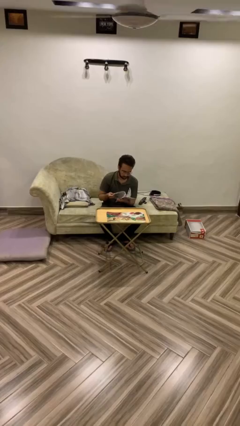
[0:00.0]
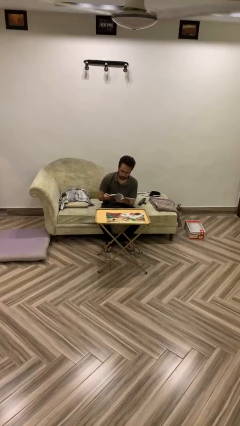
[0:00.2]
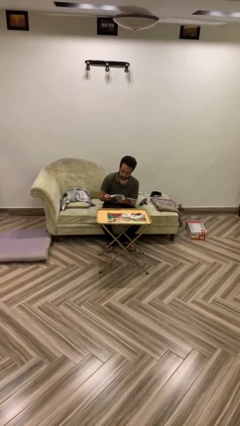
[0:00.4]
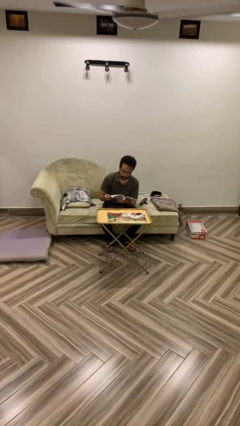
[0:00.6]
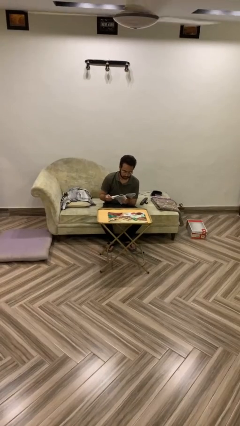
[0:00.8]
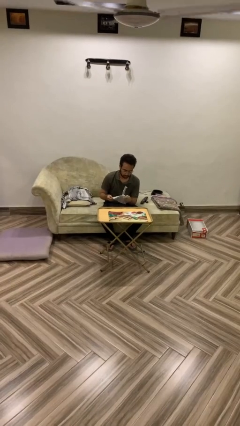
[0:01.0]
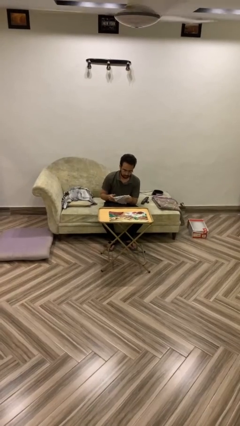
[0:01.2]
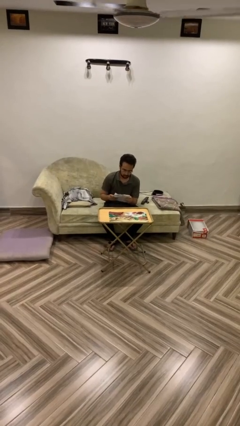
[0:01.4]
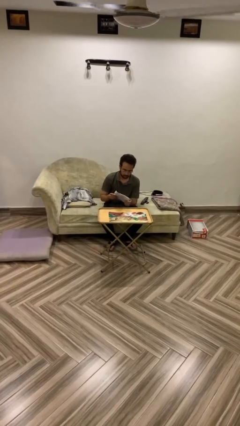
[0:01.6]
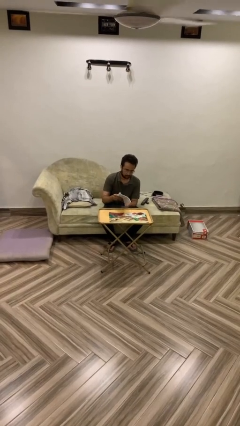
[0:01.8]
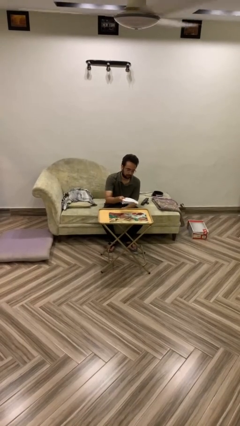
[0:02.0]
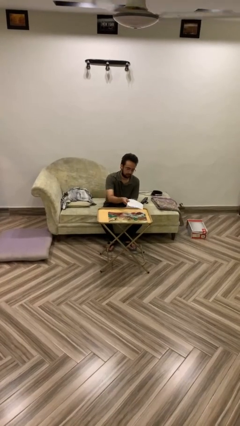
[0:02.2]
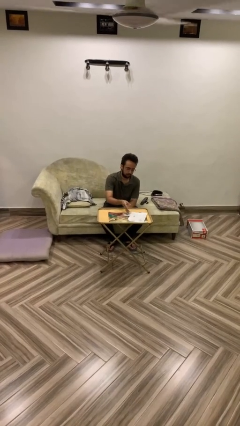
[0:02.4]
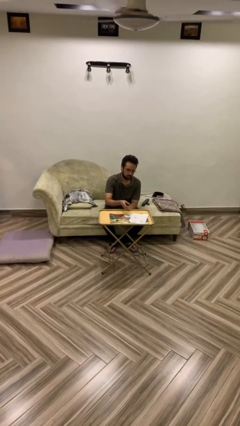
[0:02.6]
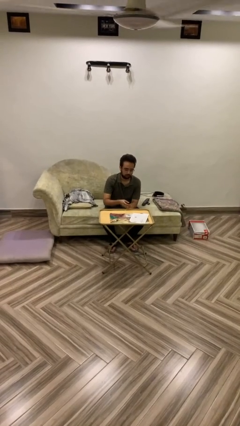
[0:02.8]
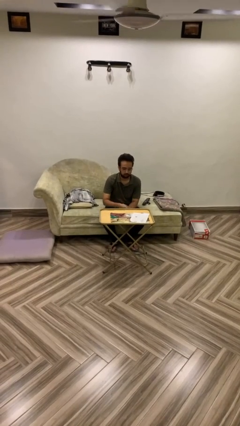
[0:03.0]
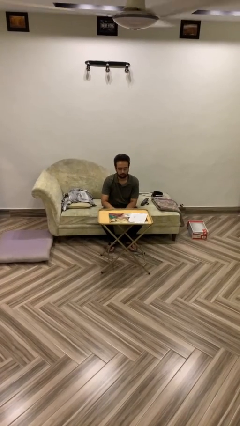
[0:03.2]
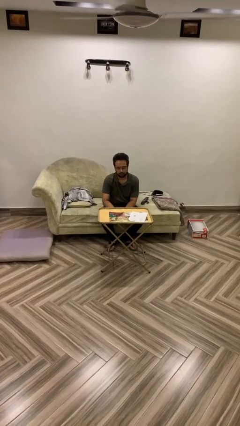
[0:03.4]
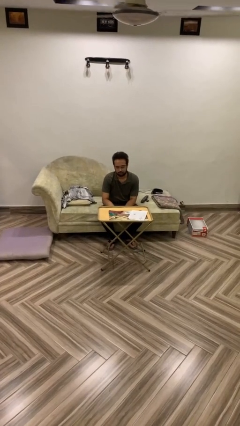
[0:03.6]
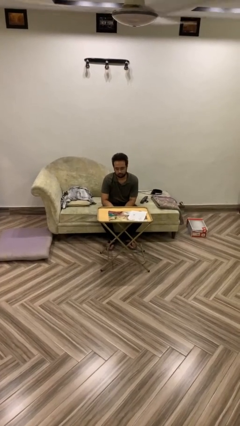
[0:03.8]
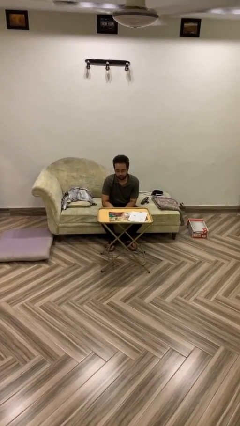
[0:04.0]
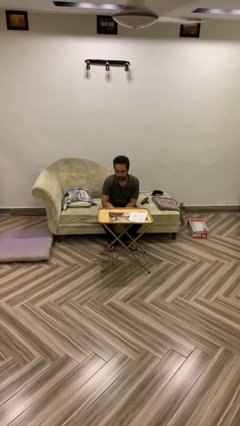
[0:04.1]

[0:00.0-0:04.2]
person puts down object on table

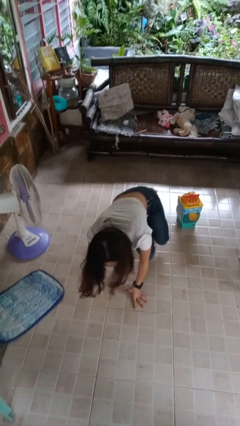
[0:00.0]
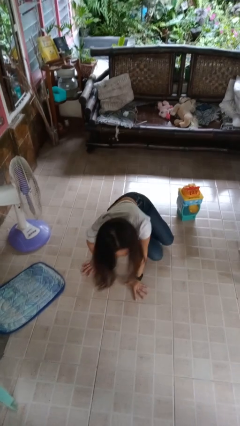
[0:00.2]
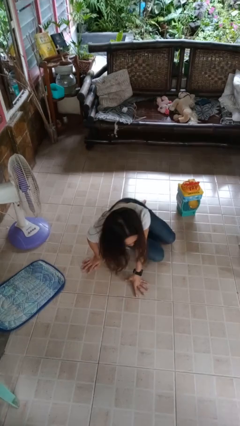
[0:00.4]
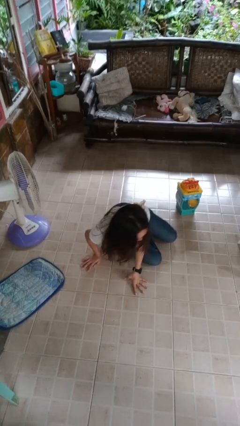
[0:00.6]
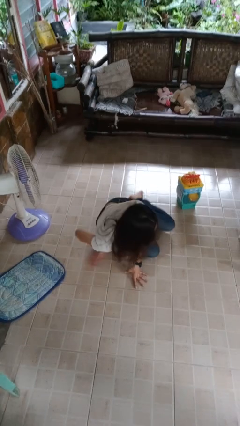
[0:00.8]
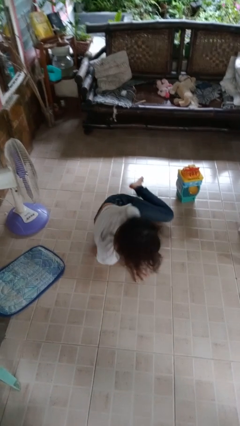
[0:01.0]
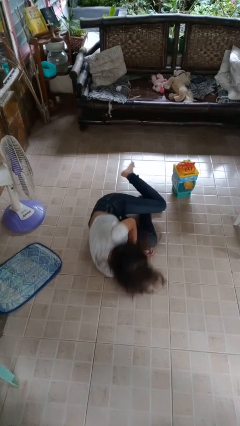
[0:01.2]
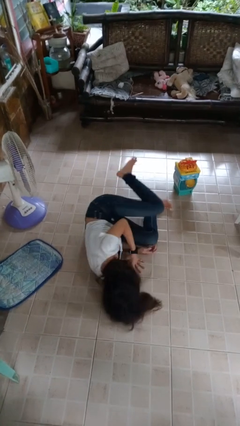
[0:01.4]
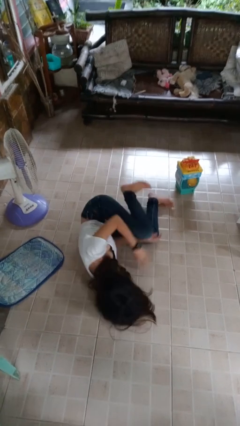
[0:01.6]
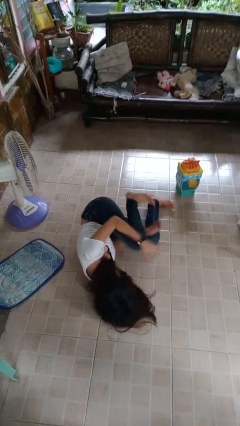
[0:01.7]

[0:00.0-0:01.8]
person lies down on floor

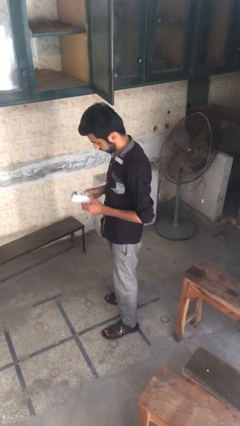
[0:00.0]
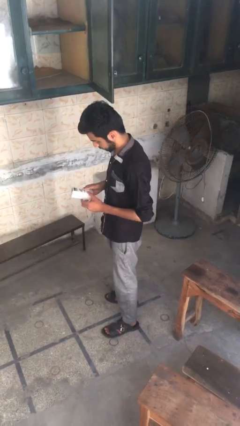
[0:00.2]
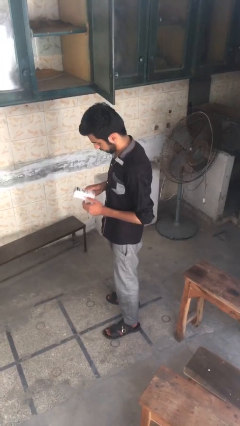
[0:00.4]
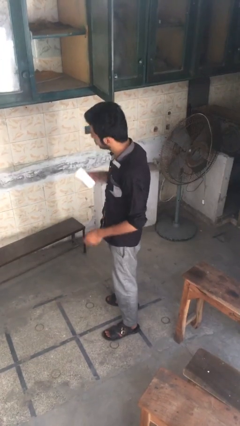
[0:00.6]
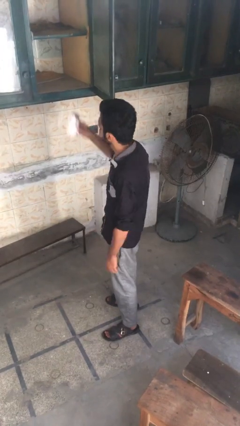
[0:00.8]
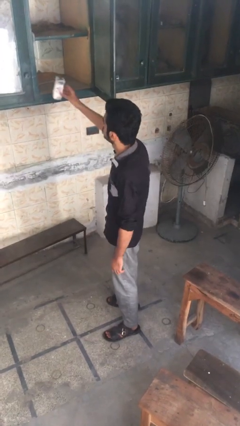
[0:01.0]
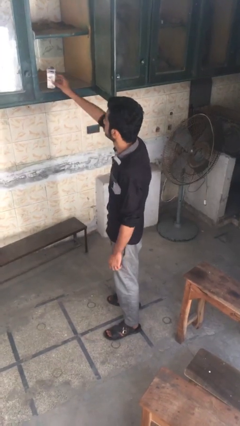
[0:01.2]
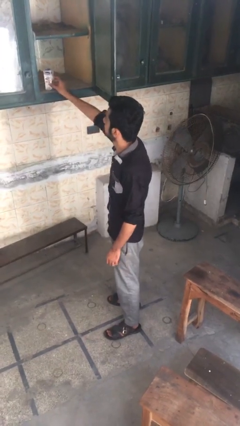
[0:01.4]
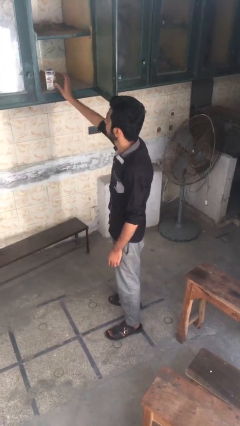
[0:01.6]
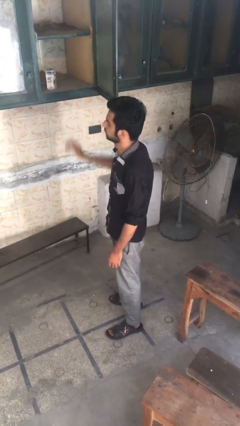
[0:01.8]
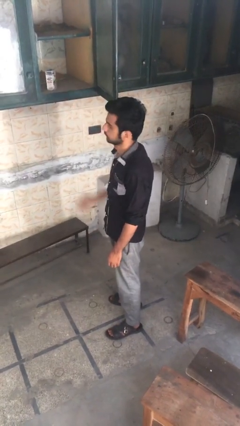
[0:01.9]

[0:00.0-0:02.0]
person puts object in cabinet

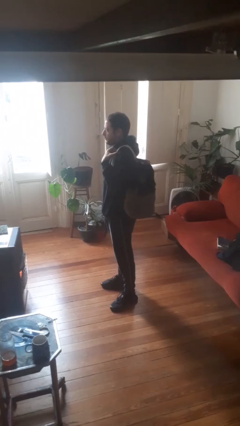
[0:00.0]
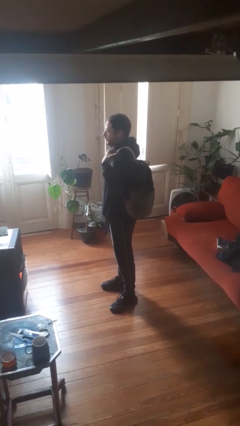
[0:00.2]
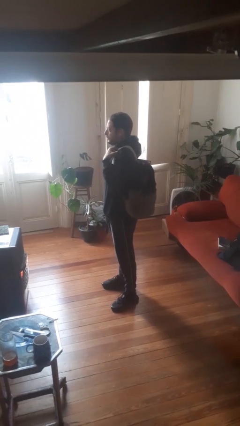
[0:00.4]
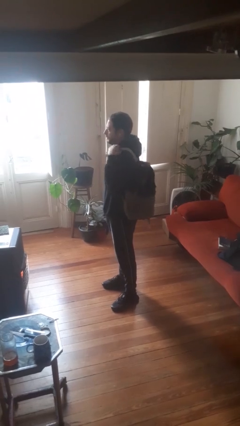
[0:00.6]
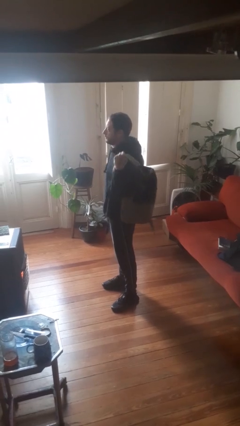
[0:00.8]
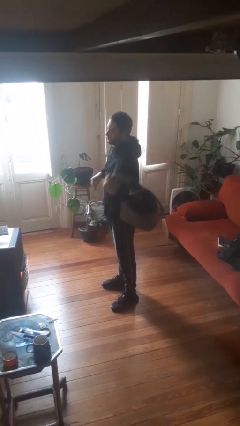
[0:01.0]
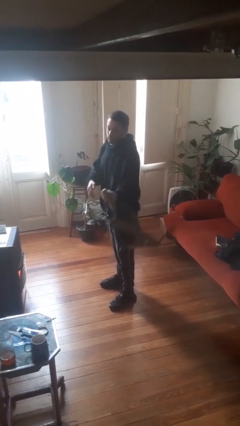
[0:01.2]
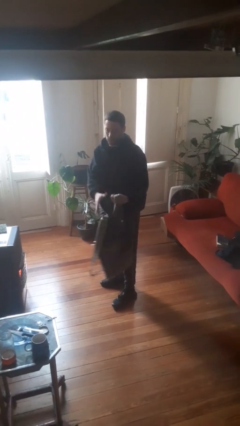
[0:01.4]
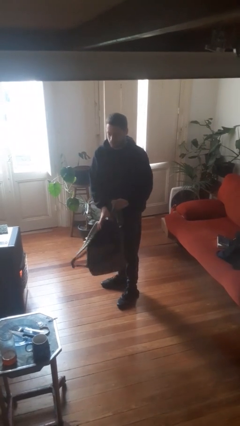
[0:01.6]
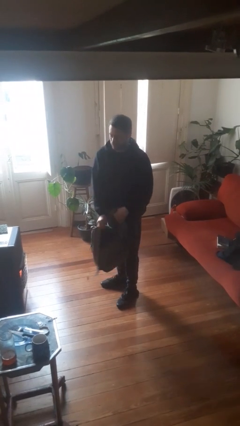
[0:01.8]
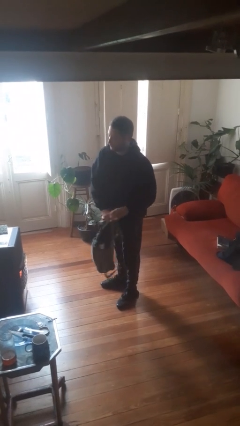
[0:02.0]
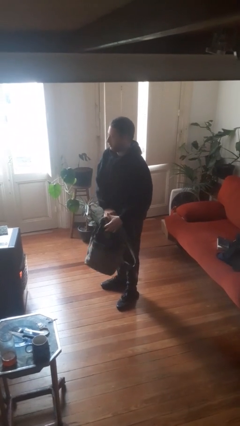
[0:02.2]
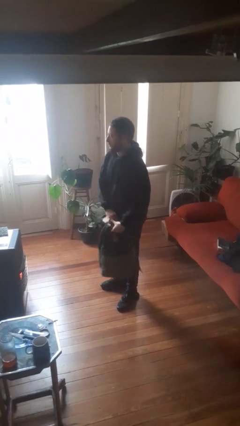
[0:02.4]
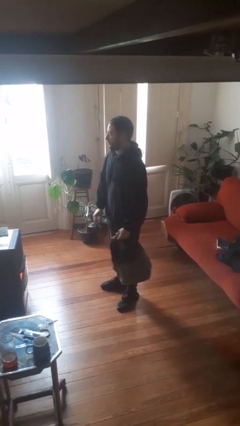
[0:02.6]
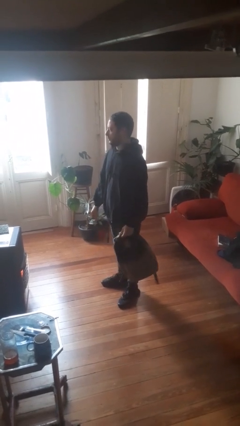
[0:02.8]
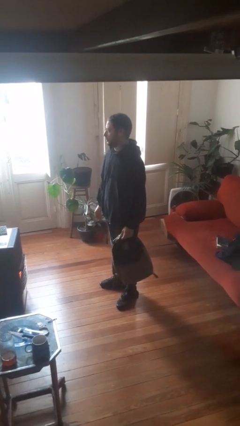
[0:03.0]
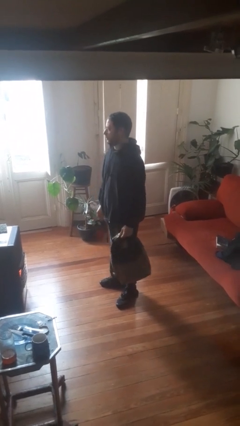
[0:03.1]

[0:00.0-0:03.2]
person takes off backpack

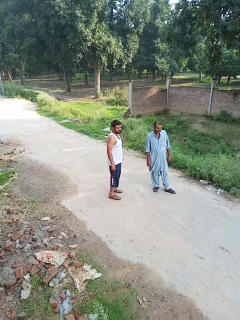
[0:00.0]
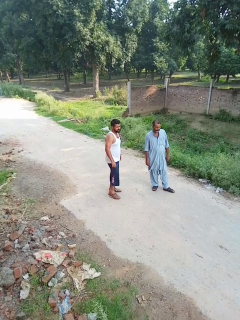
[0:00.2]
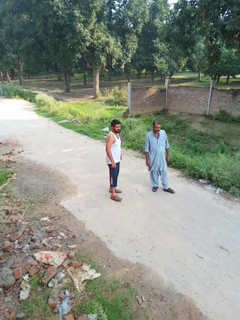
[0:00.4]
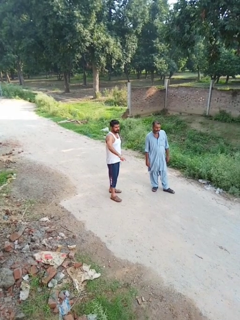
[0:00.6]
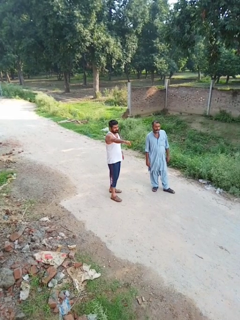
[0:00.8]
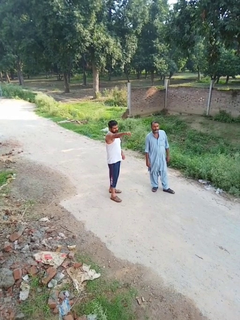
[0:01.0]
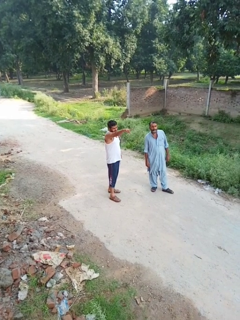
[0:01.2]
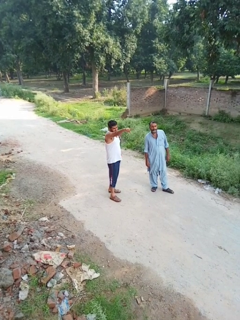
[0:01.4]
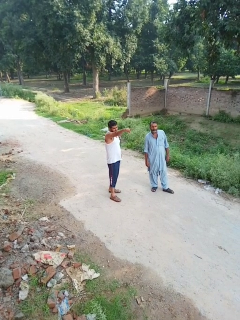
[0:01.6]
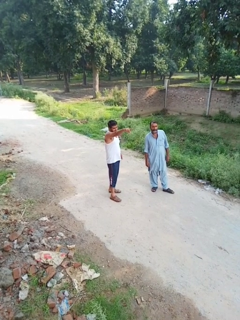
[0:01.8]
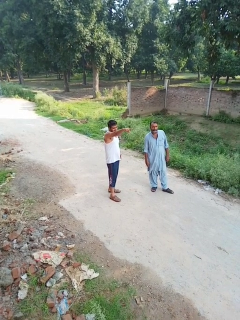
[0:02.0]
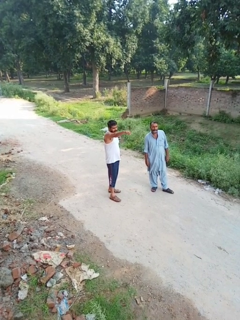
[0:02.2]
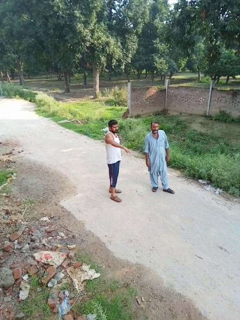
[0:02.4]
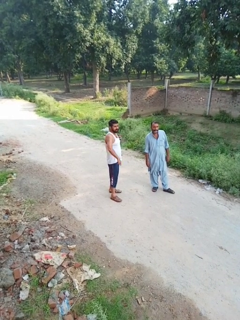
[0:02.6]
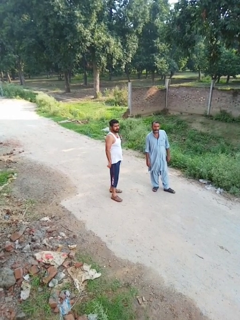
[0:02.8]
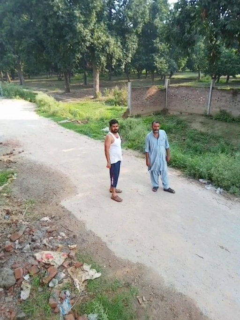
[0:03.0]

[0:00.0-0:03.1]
person points at person

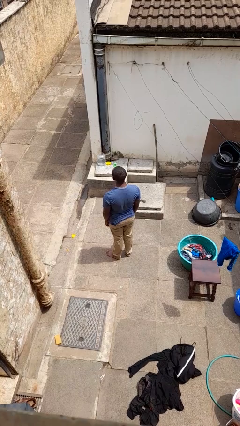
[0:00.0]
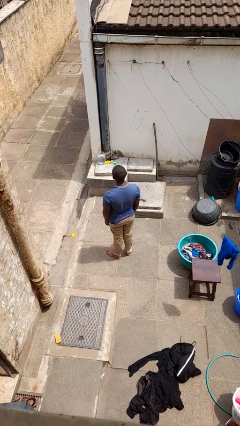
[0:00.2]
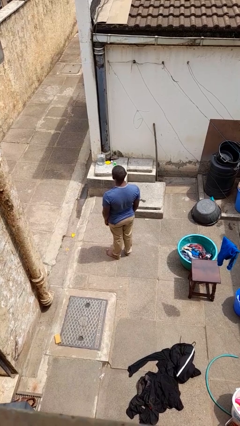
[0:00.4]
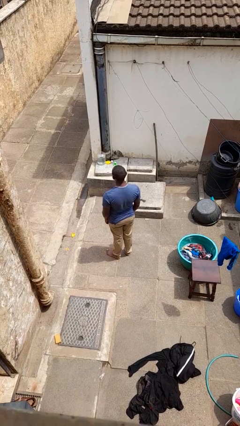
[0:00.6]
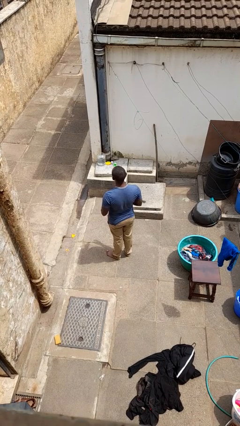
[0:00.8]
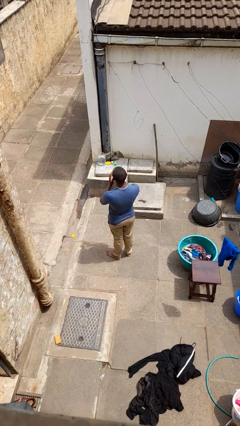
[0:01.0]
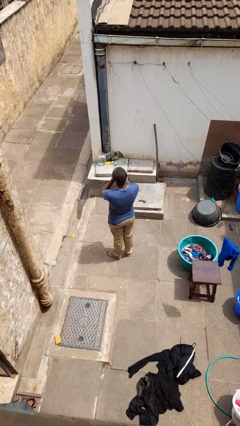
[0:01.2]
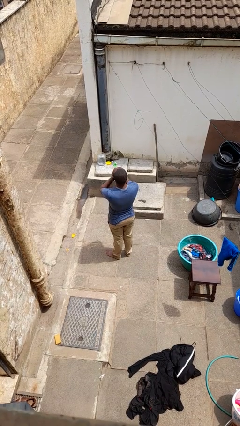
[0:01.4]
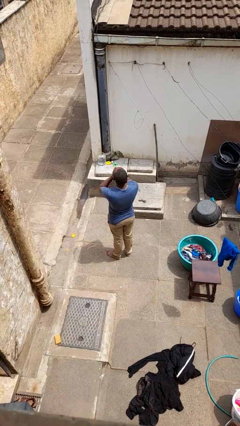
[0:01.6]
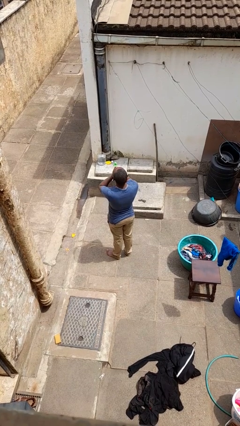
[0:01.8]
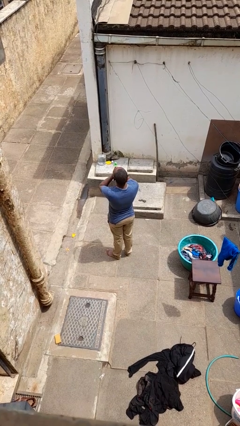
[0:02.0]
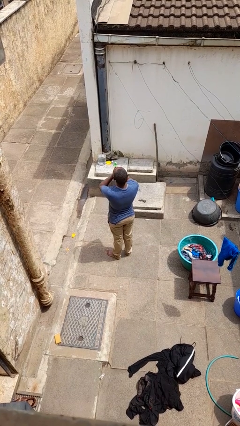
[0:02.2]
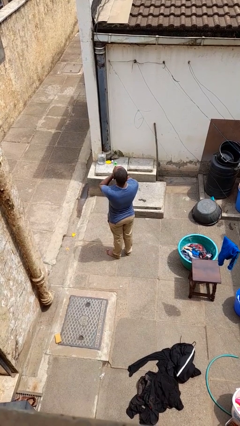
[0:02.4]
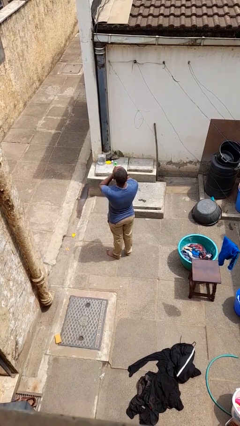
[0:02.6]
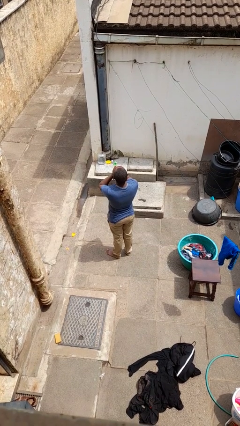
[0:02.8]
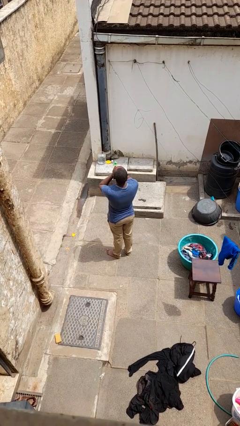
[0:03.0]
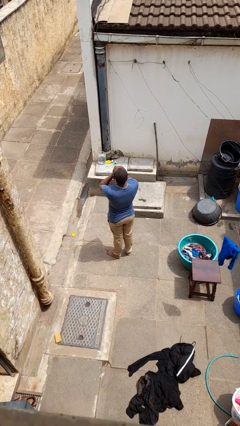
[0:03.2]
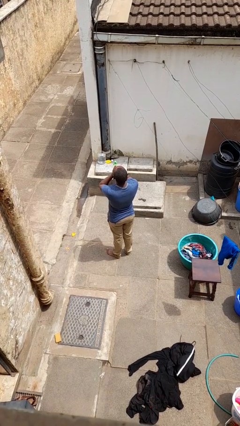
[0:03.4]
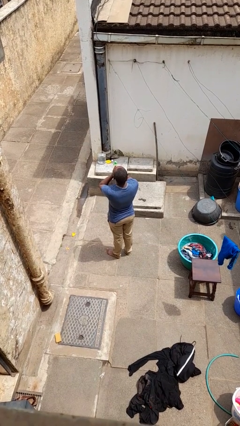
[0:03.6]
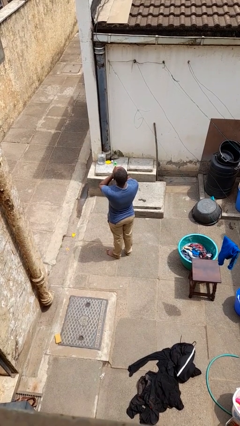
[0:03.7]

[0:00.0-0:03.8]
person yawns
